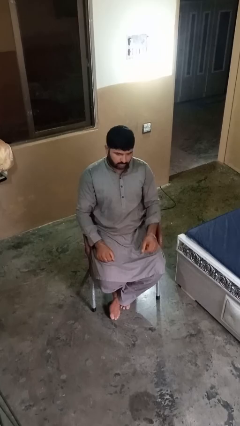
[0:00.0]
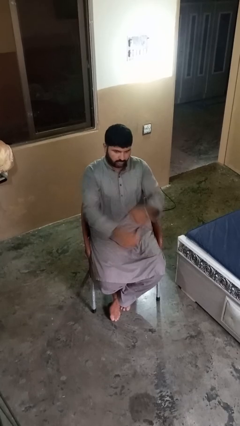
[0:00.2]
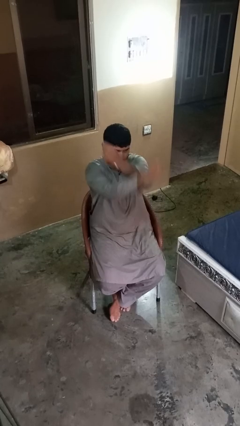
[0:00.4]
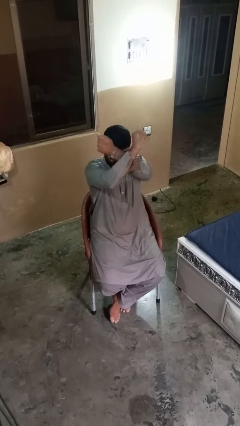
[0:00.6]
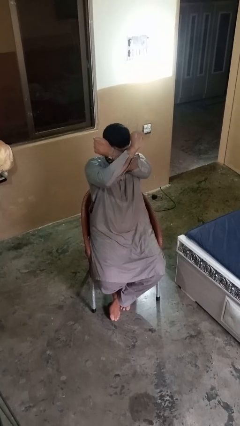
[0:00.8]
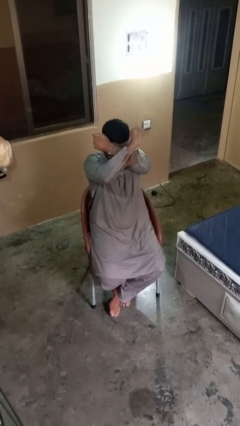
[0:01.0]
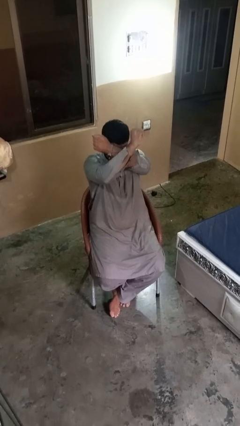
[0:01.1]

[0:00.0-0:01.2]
person gestures arms x

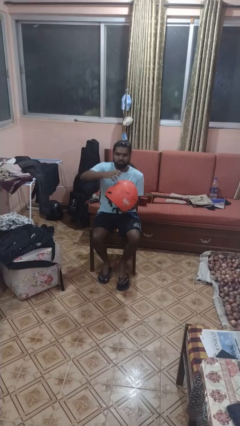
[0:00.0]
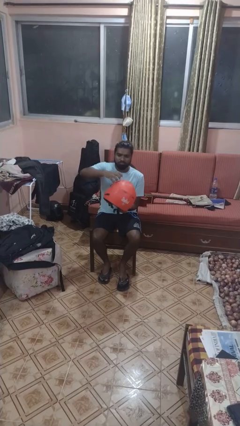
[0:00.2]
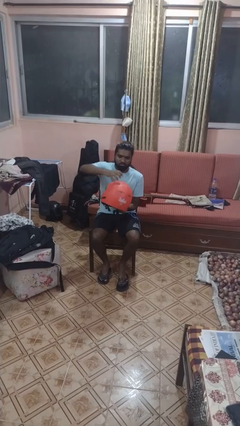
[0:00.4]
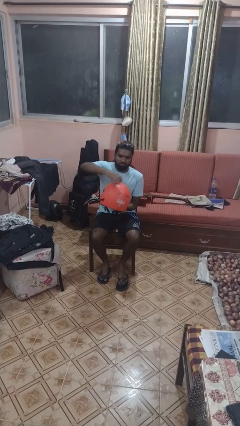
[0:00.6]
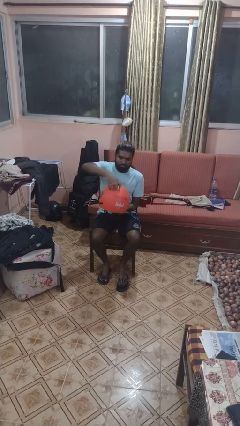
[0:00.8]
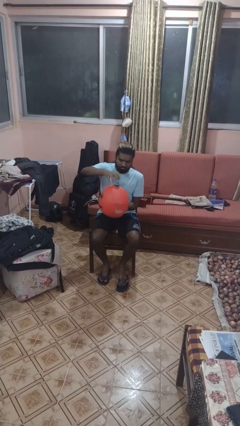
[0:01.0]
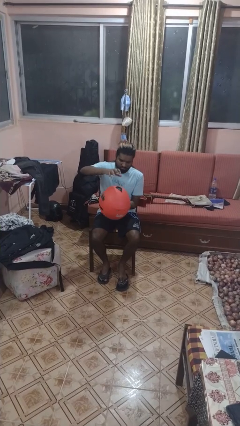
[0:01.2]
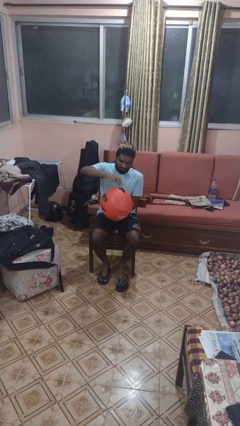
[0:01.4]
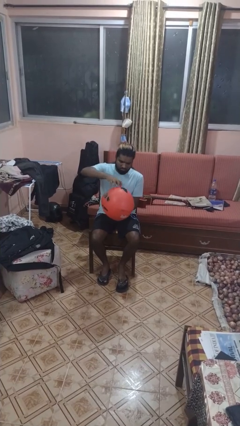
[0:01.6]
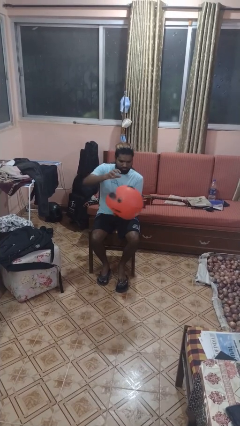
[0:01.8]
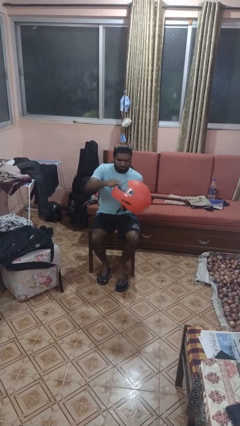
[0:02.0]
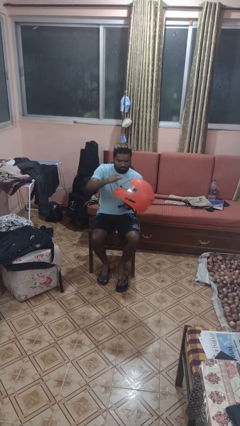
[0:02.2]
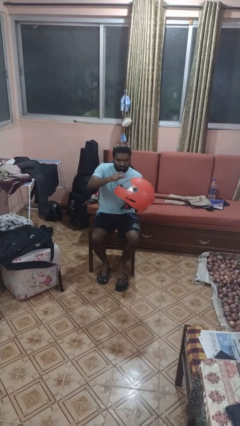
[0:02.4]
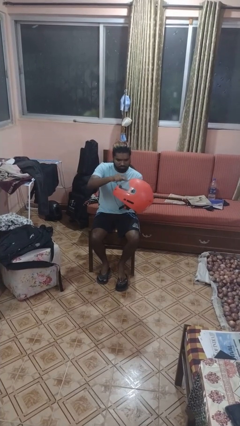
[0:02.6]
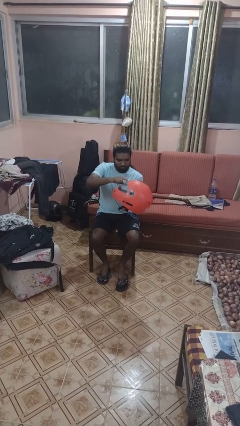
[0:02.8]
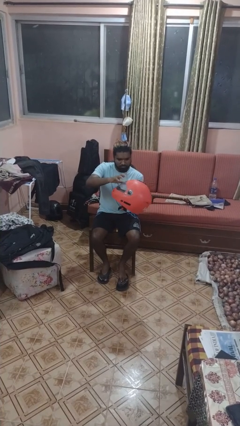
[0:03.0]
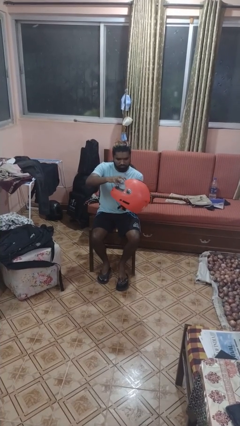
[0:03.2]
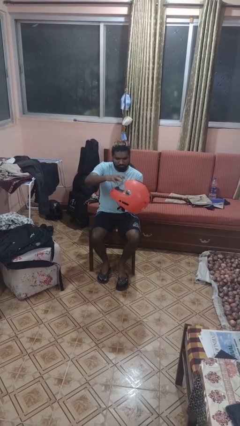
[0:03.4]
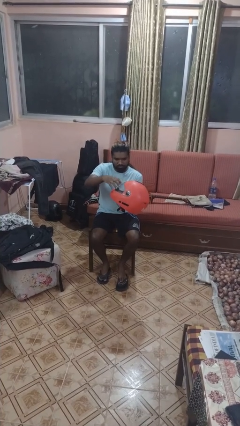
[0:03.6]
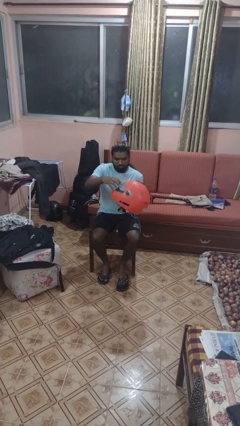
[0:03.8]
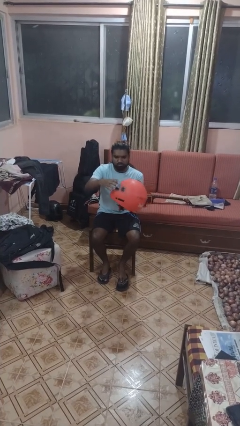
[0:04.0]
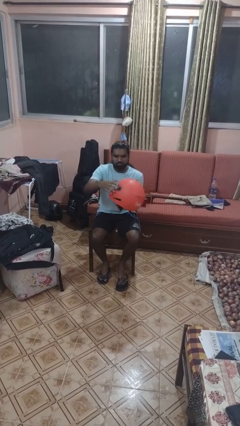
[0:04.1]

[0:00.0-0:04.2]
person taps object with finger

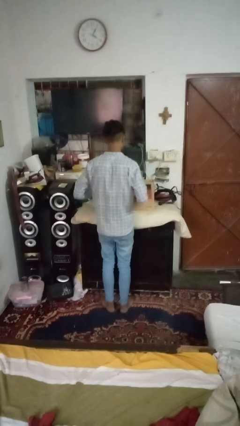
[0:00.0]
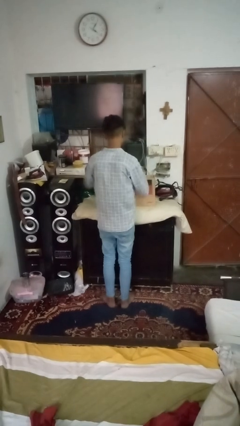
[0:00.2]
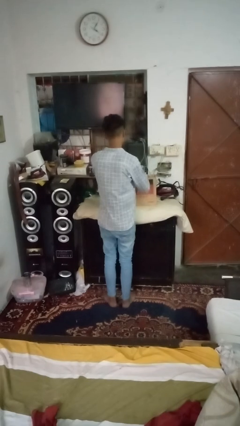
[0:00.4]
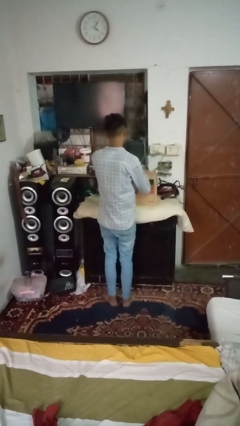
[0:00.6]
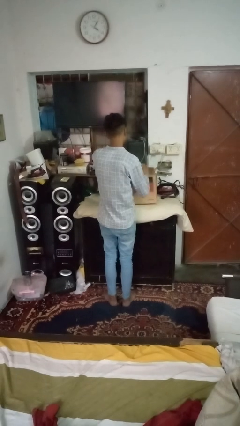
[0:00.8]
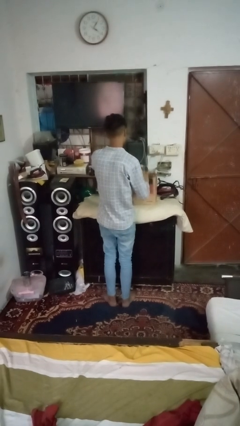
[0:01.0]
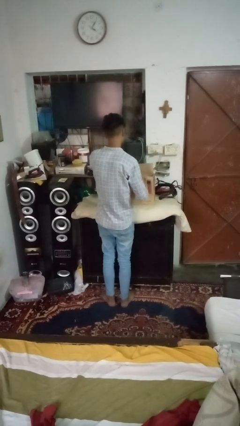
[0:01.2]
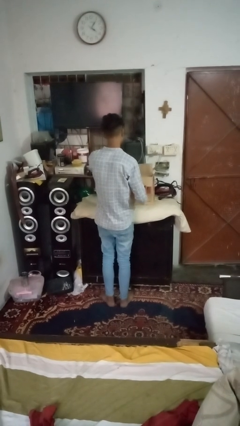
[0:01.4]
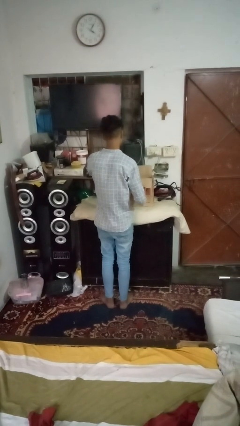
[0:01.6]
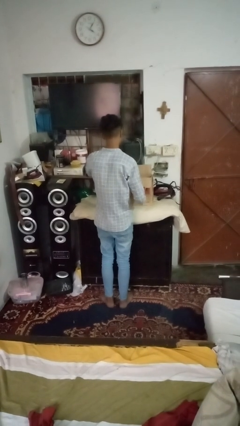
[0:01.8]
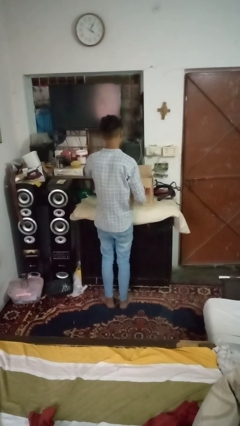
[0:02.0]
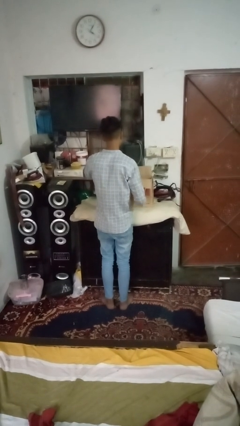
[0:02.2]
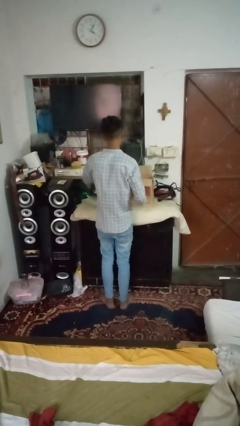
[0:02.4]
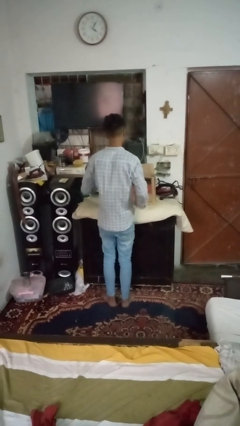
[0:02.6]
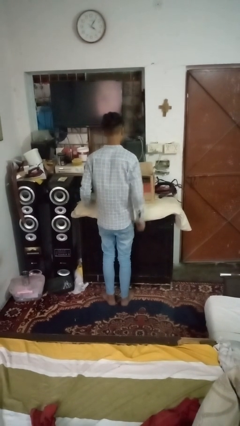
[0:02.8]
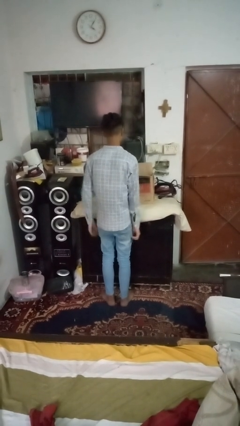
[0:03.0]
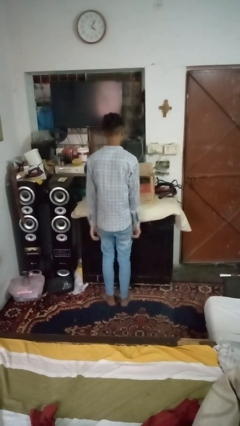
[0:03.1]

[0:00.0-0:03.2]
person opens box

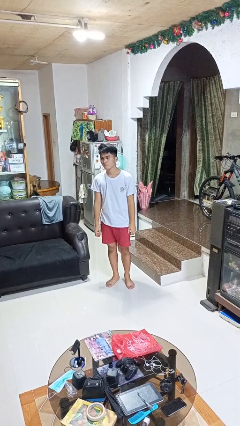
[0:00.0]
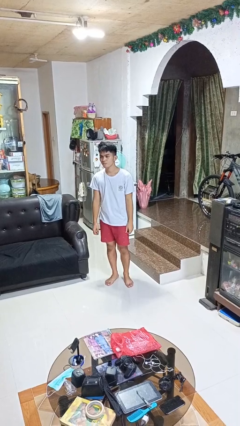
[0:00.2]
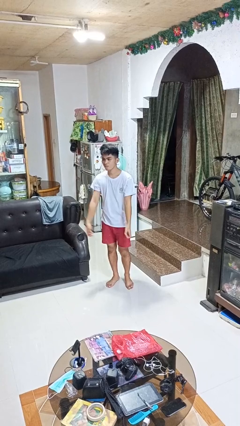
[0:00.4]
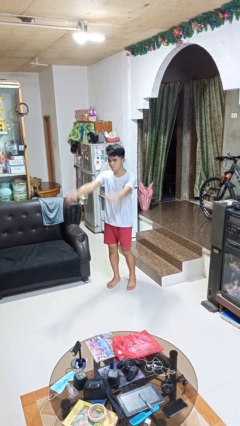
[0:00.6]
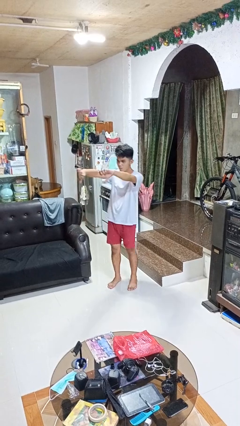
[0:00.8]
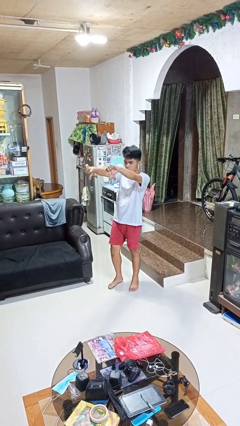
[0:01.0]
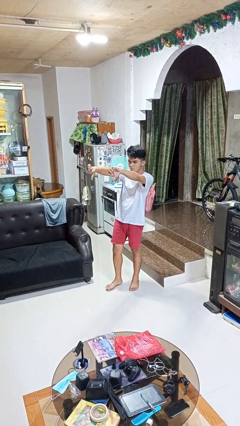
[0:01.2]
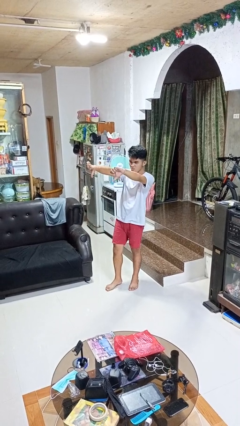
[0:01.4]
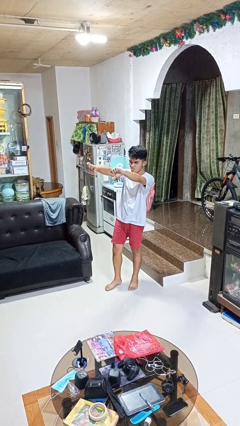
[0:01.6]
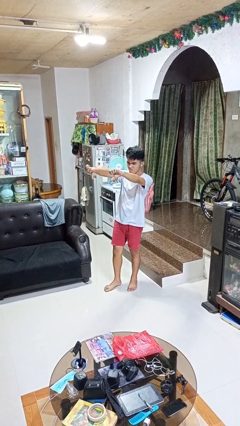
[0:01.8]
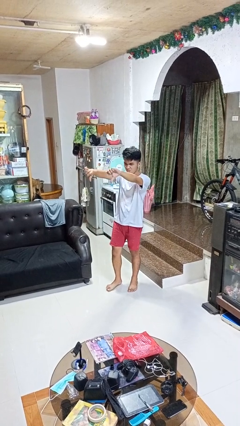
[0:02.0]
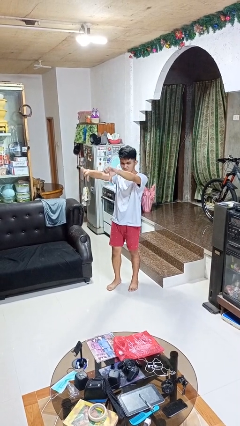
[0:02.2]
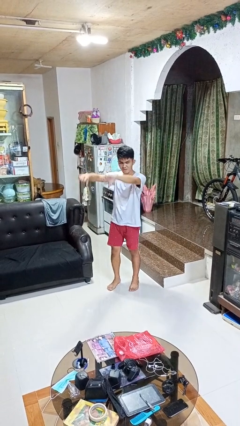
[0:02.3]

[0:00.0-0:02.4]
person gestures thumbs down

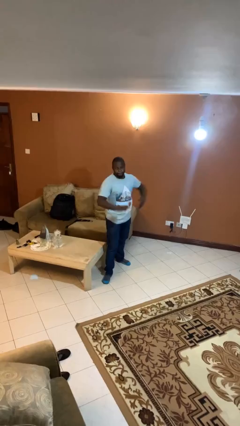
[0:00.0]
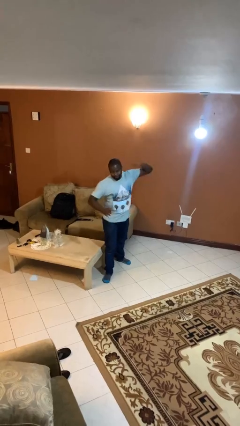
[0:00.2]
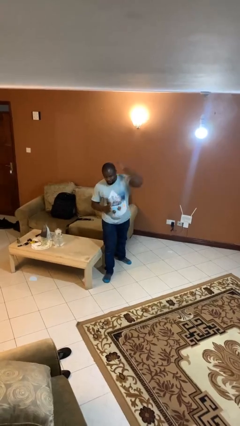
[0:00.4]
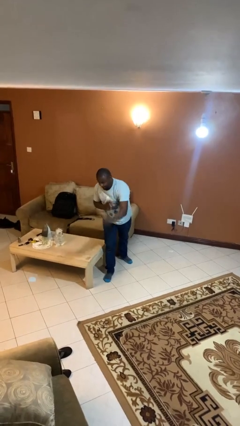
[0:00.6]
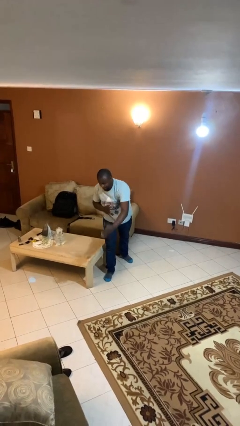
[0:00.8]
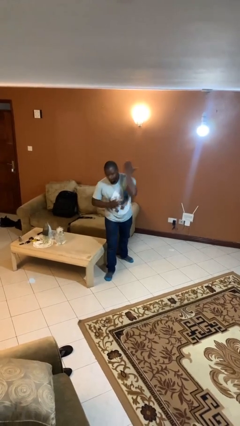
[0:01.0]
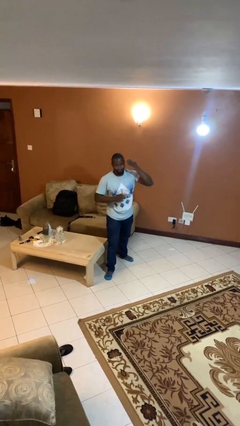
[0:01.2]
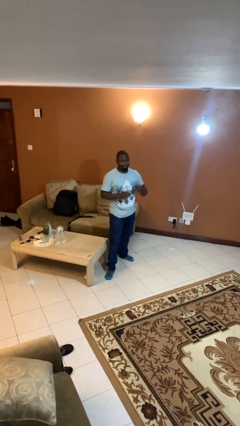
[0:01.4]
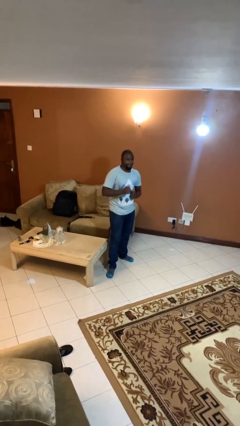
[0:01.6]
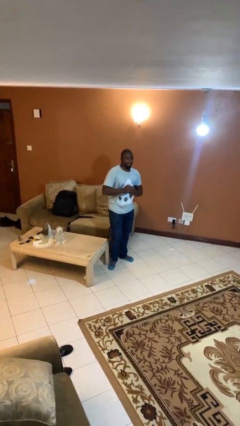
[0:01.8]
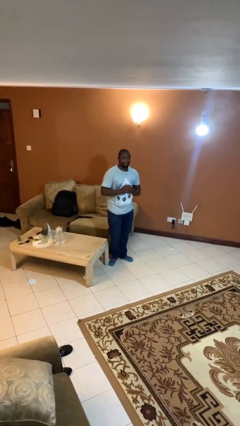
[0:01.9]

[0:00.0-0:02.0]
person karate chop

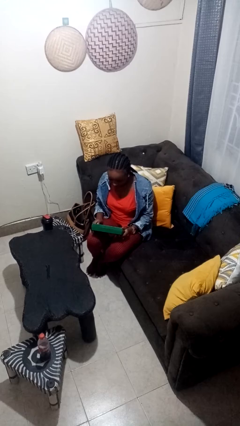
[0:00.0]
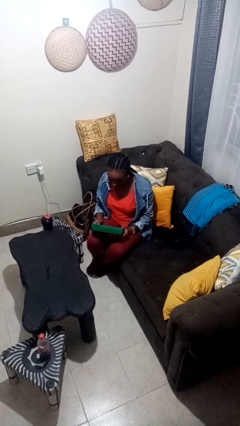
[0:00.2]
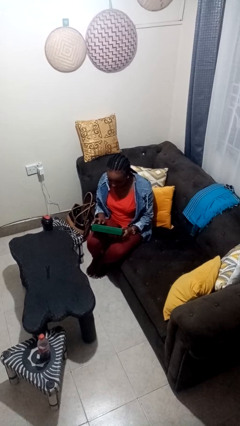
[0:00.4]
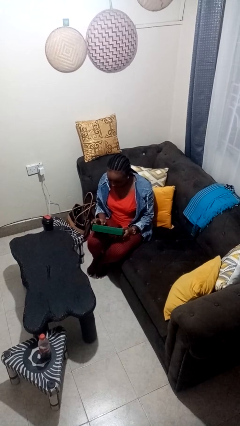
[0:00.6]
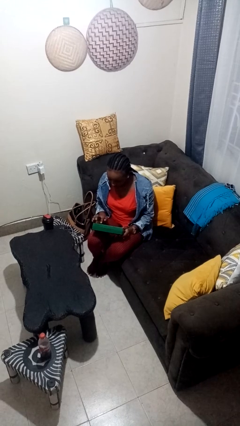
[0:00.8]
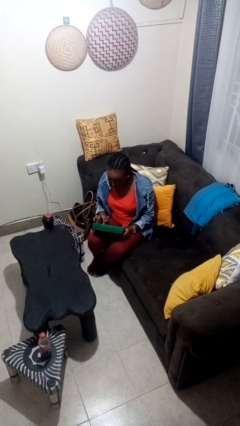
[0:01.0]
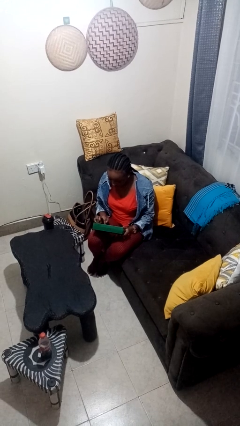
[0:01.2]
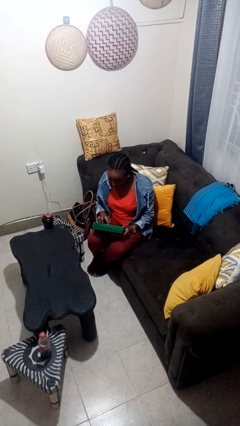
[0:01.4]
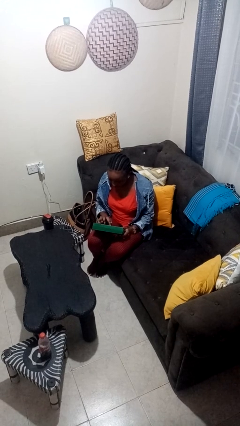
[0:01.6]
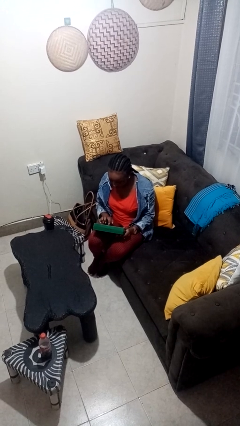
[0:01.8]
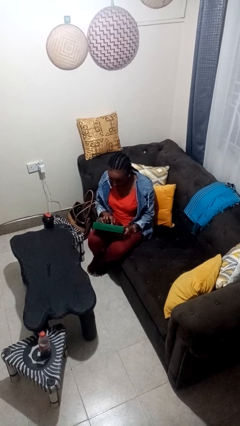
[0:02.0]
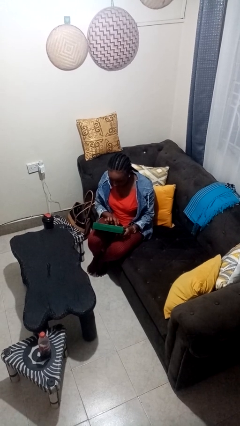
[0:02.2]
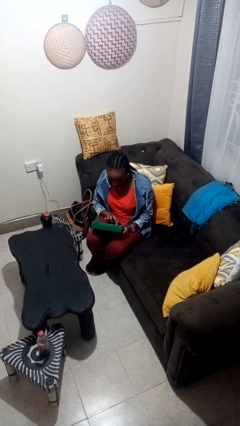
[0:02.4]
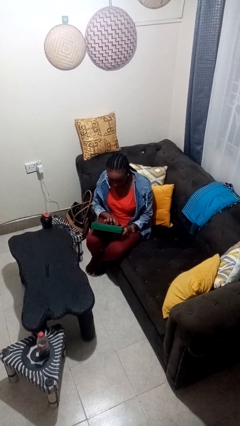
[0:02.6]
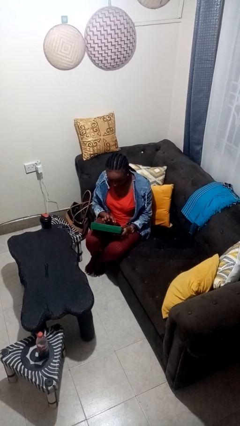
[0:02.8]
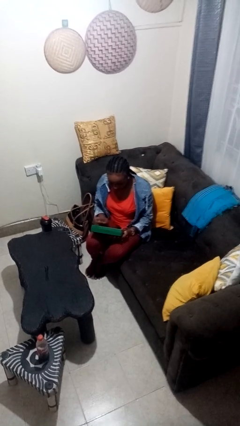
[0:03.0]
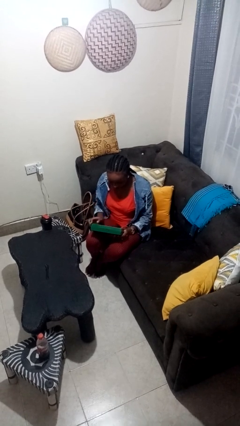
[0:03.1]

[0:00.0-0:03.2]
person interacts with handheld game

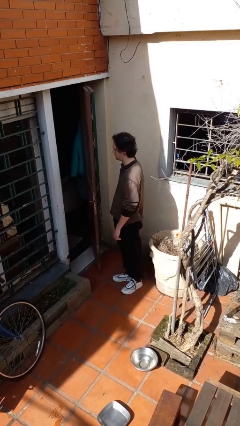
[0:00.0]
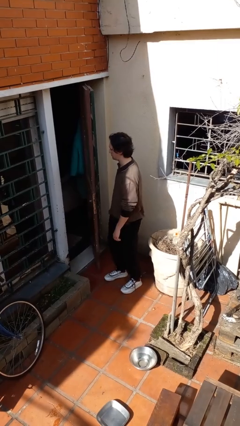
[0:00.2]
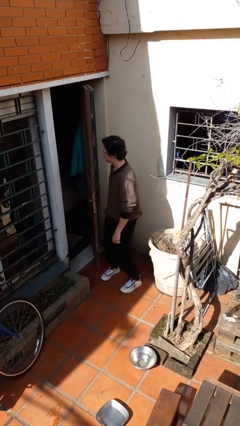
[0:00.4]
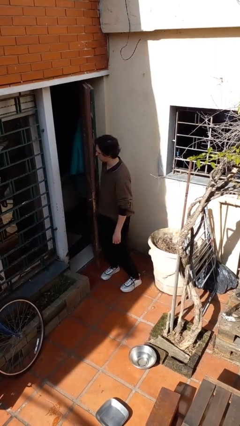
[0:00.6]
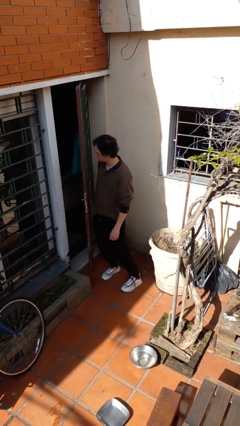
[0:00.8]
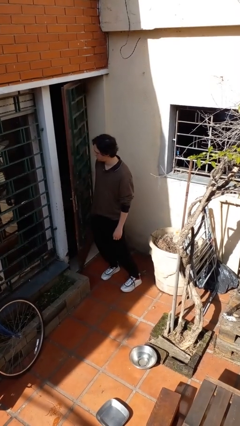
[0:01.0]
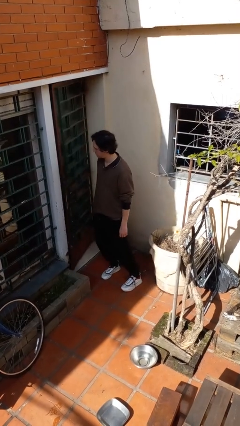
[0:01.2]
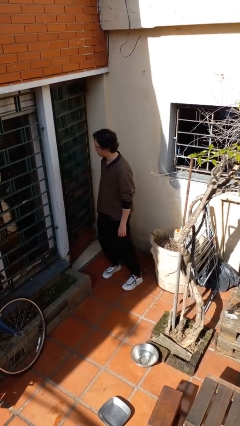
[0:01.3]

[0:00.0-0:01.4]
person closes door with hip
